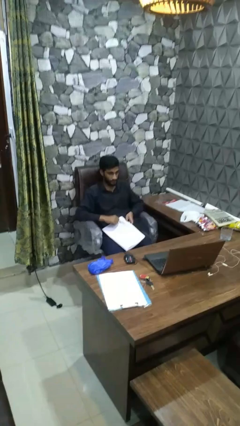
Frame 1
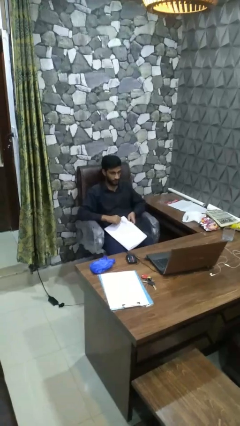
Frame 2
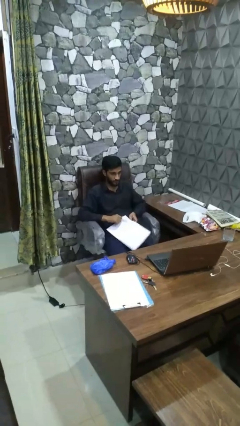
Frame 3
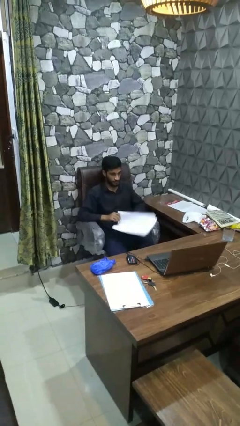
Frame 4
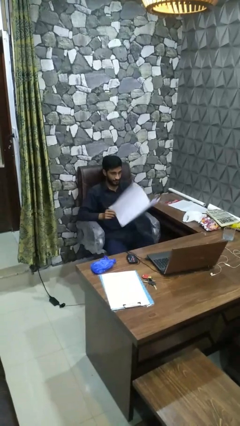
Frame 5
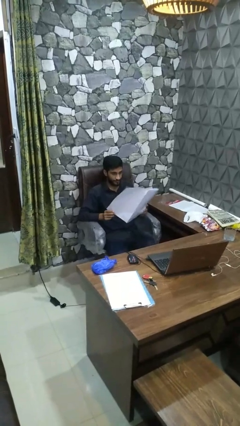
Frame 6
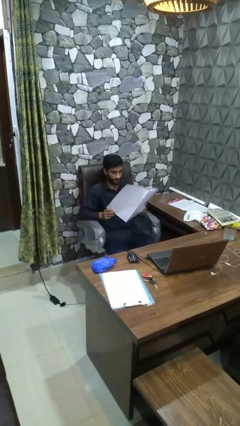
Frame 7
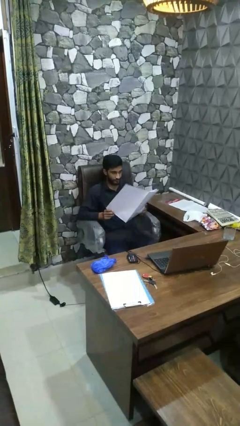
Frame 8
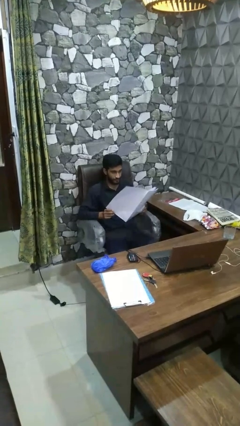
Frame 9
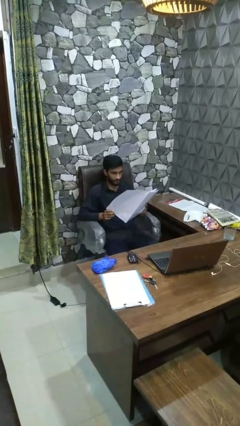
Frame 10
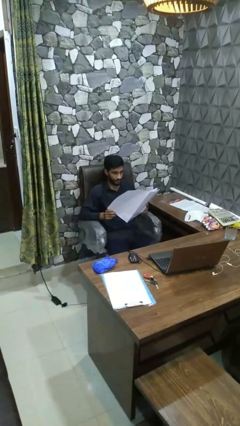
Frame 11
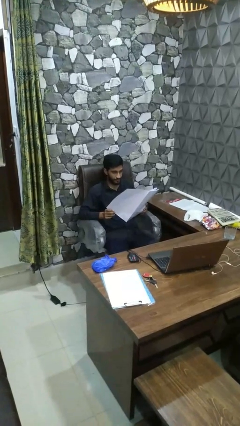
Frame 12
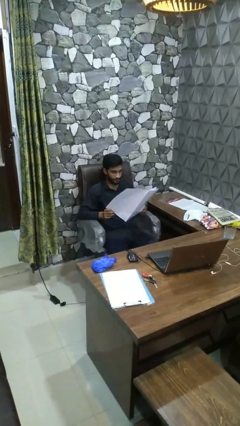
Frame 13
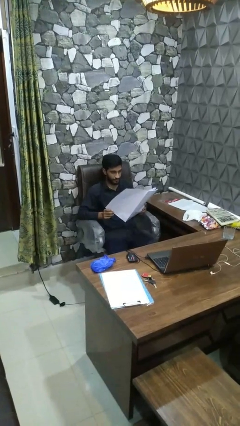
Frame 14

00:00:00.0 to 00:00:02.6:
person reads magazine

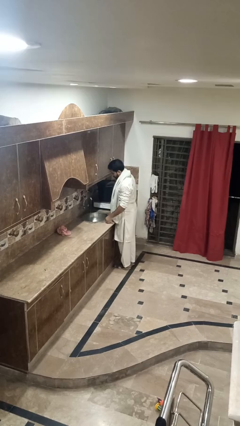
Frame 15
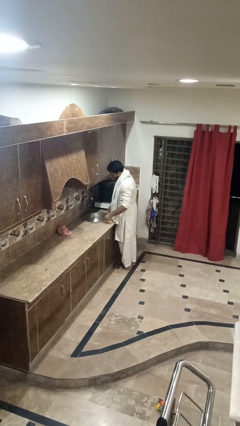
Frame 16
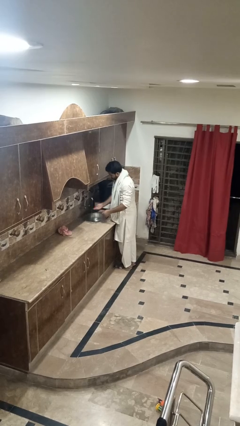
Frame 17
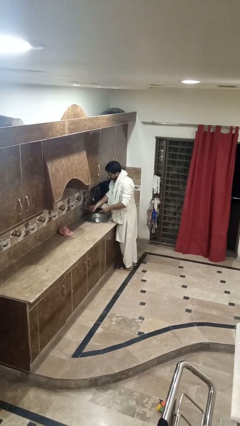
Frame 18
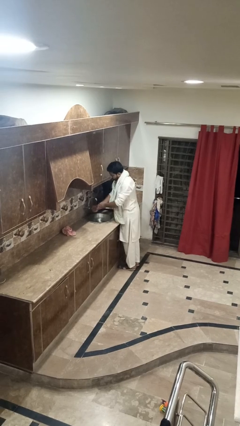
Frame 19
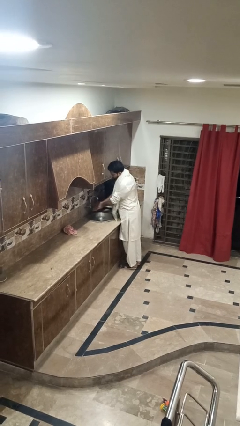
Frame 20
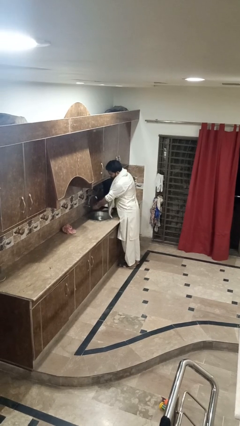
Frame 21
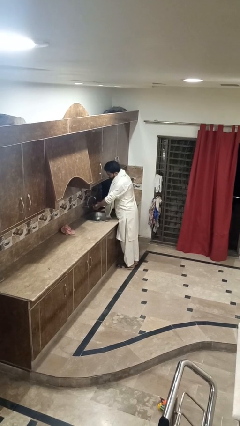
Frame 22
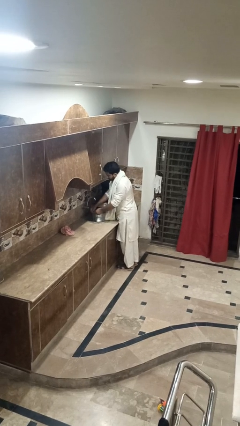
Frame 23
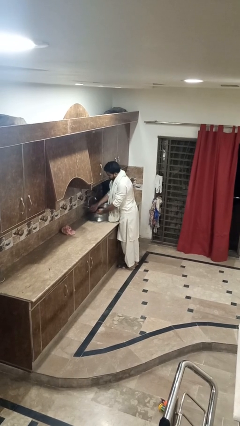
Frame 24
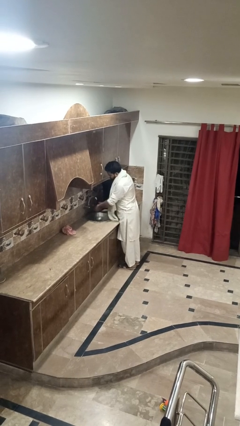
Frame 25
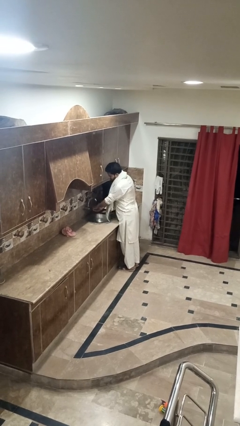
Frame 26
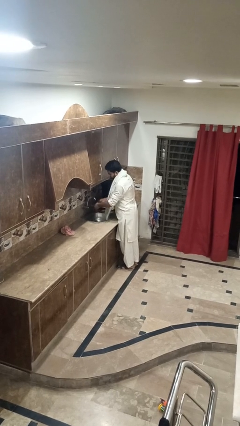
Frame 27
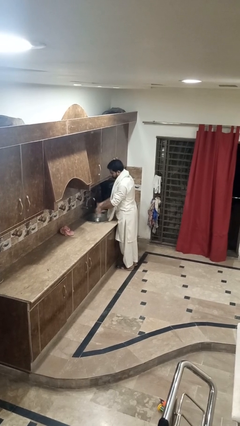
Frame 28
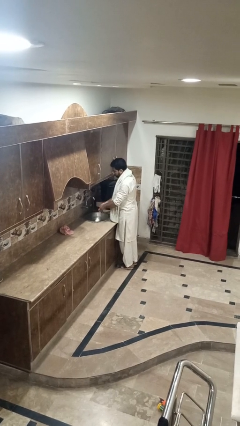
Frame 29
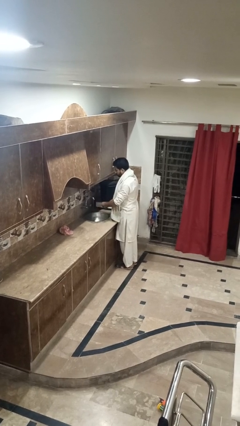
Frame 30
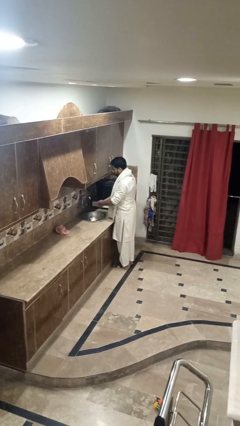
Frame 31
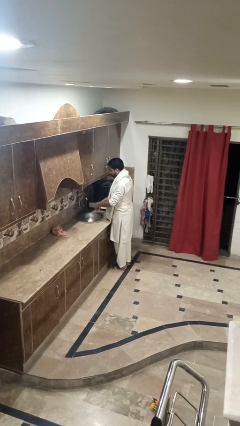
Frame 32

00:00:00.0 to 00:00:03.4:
person washes hands

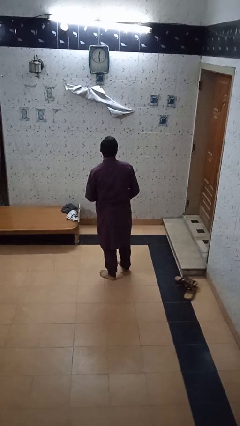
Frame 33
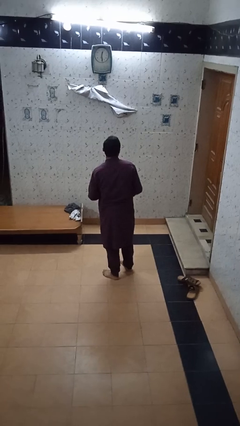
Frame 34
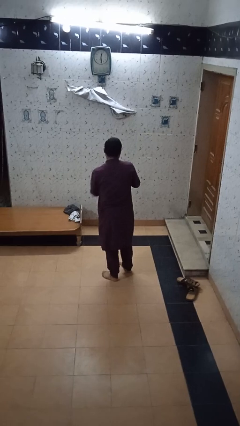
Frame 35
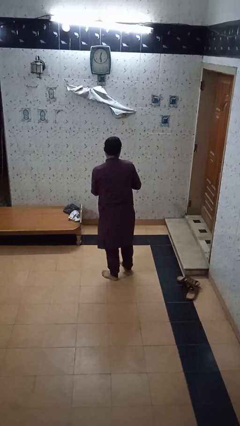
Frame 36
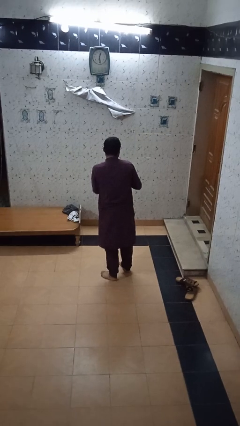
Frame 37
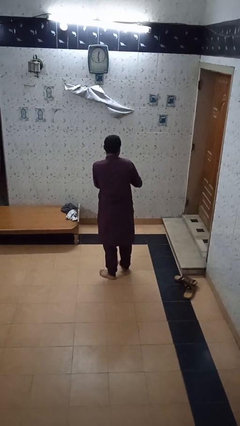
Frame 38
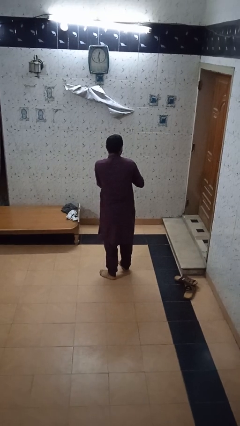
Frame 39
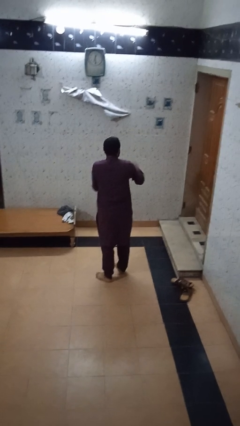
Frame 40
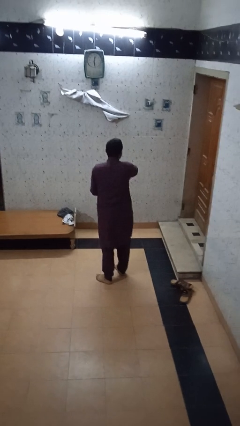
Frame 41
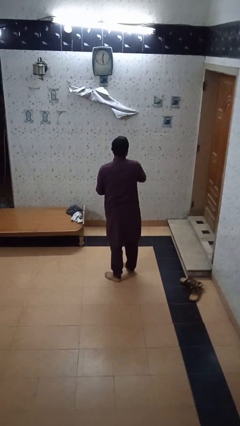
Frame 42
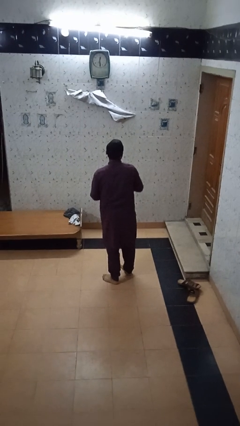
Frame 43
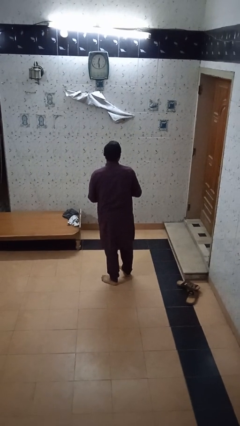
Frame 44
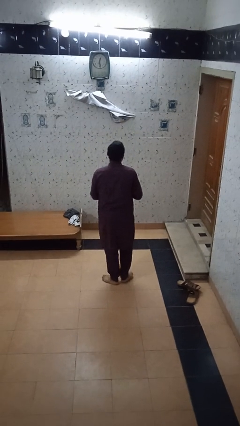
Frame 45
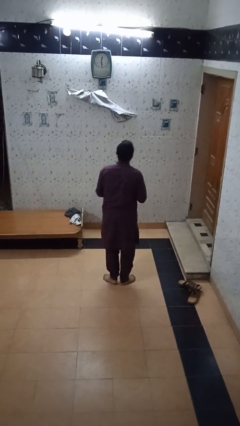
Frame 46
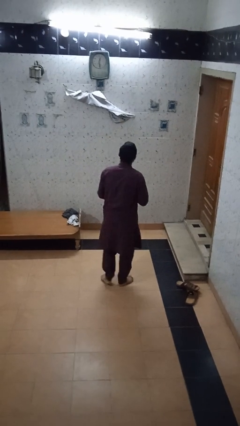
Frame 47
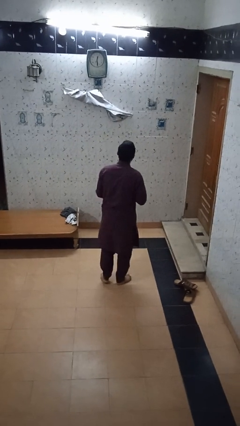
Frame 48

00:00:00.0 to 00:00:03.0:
person karate chop

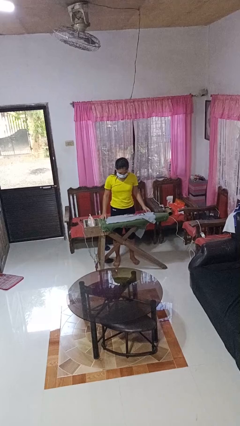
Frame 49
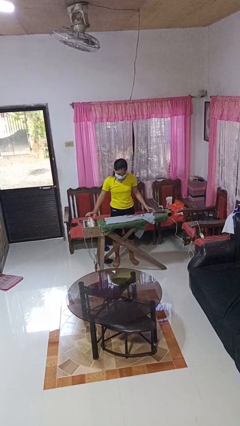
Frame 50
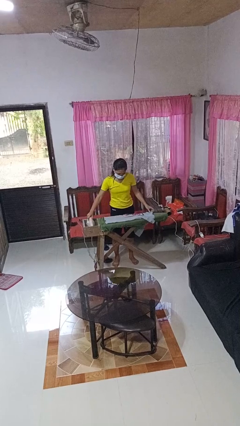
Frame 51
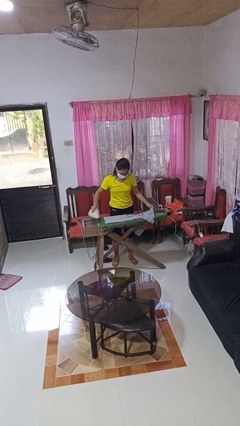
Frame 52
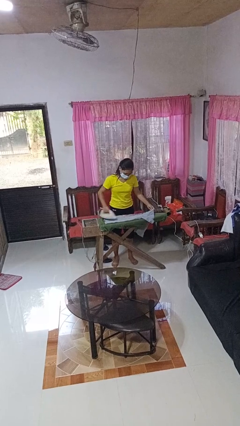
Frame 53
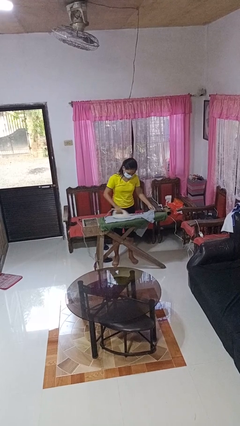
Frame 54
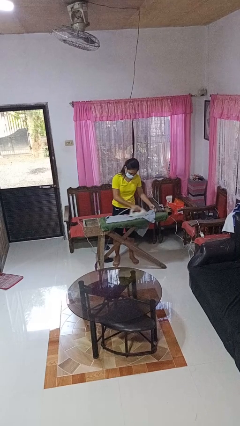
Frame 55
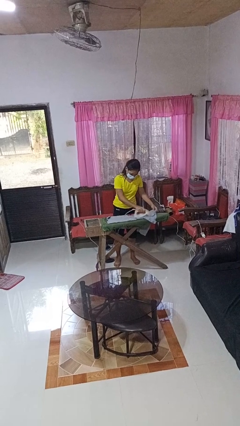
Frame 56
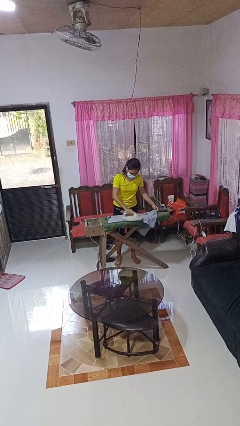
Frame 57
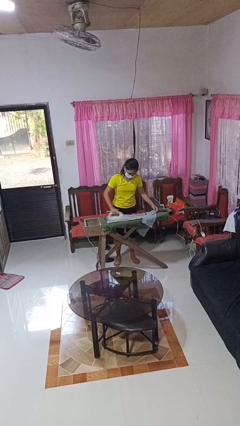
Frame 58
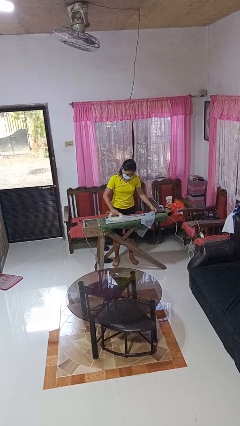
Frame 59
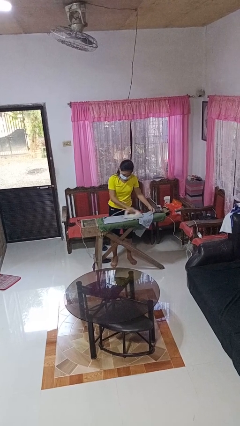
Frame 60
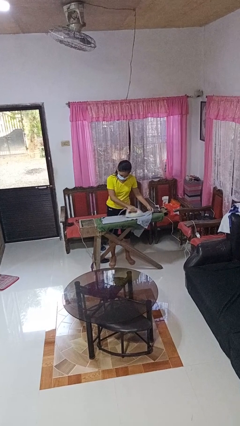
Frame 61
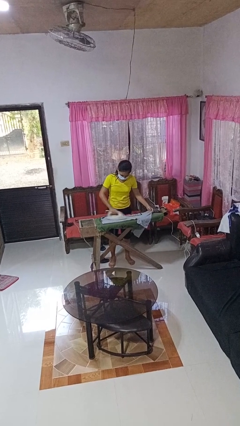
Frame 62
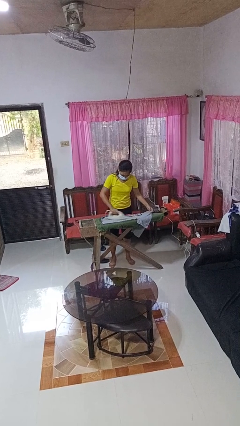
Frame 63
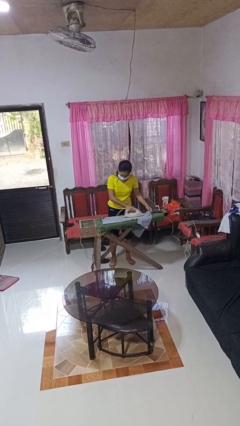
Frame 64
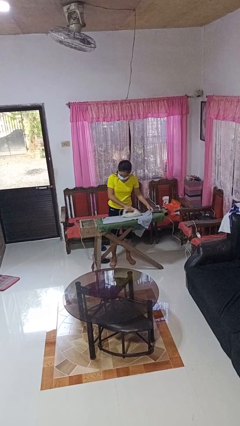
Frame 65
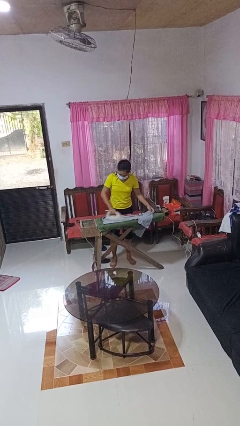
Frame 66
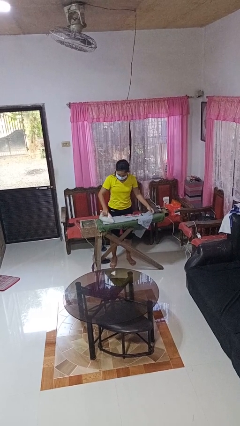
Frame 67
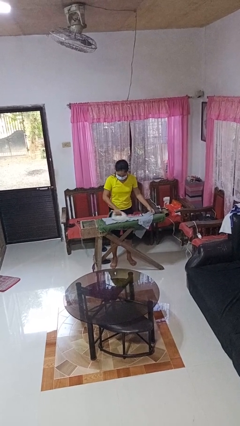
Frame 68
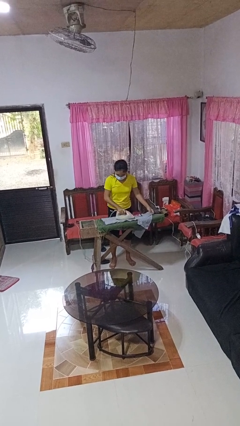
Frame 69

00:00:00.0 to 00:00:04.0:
person irons clothes

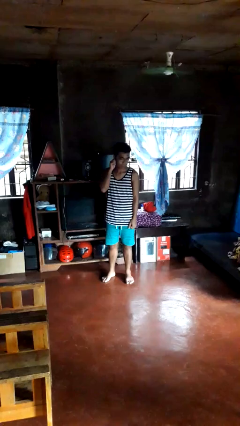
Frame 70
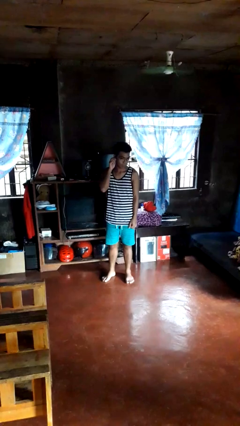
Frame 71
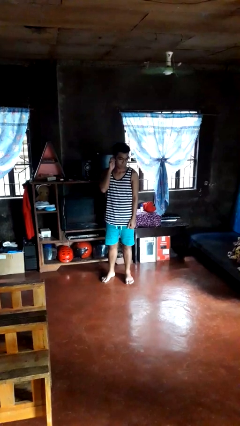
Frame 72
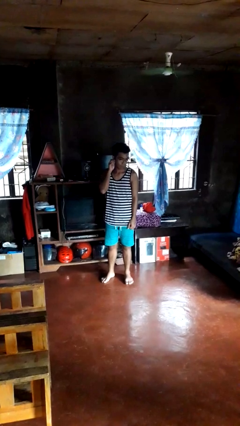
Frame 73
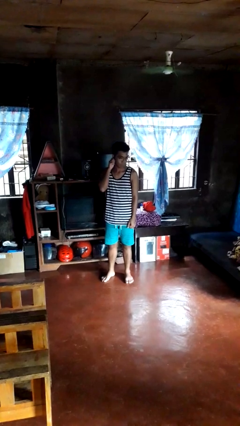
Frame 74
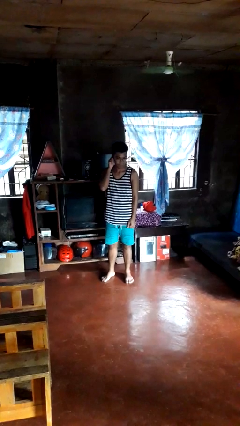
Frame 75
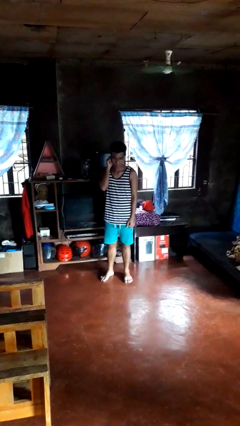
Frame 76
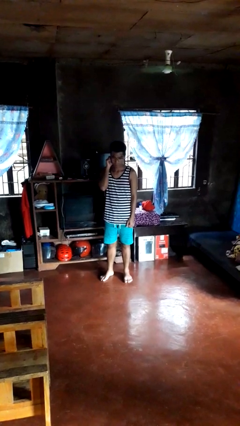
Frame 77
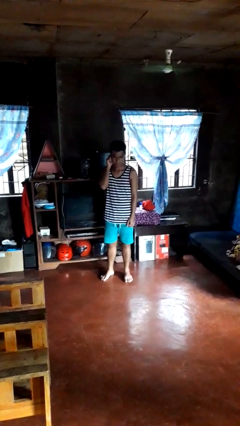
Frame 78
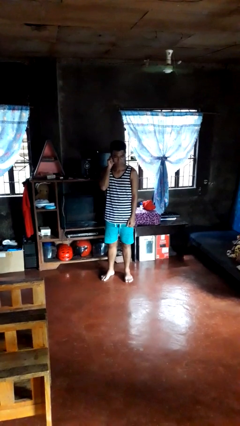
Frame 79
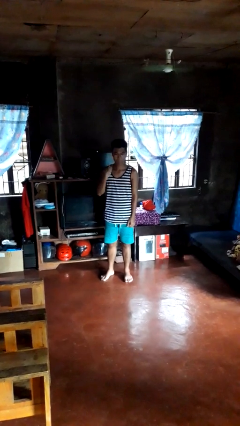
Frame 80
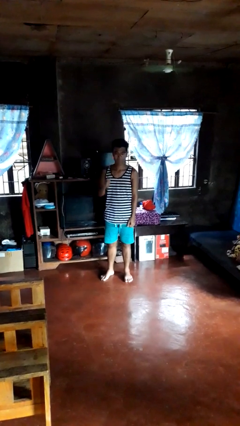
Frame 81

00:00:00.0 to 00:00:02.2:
person touches earlobe

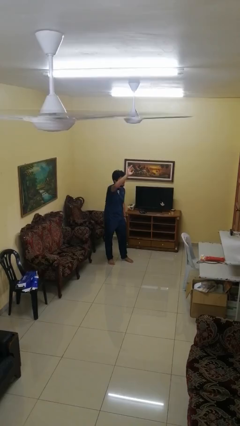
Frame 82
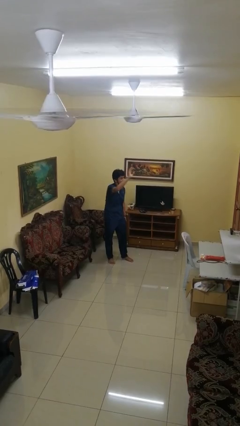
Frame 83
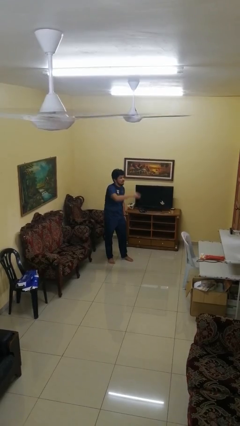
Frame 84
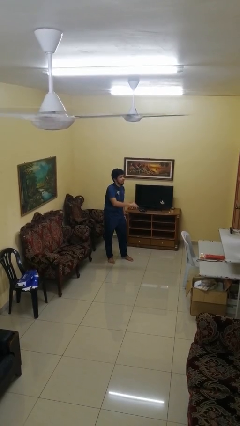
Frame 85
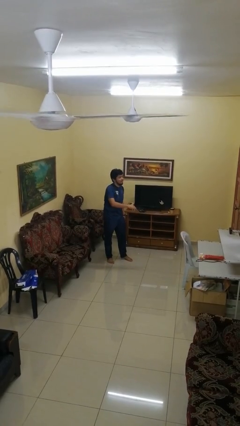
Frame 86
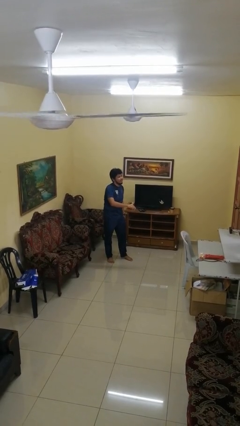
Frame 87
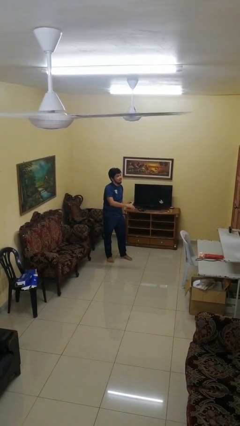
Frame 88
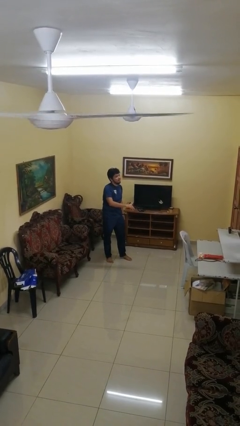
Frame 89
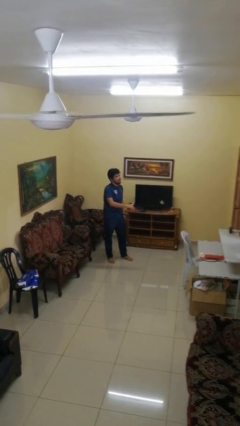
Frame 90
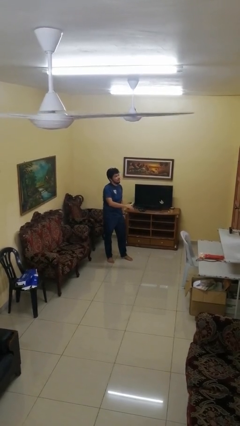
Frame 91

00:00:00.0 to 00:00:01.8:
person gestures swipe down

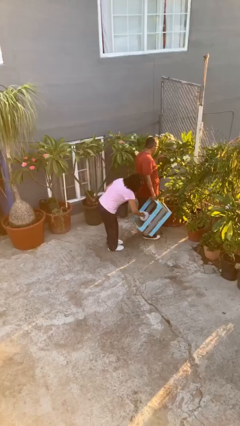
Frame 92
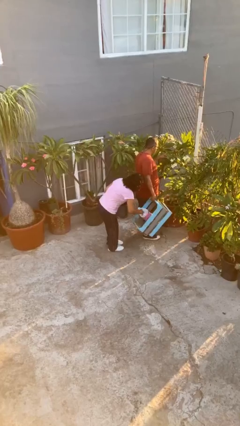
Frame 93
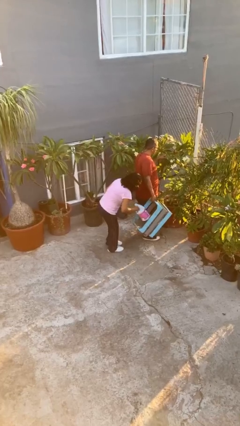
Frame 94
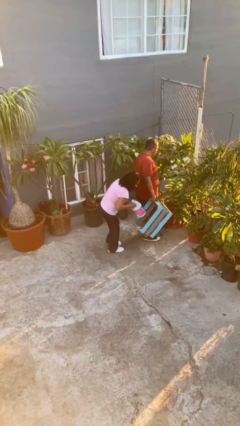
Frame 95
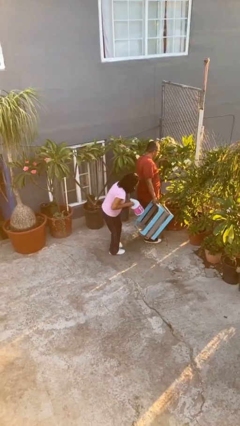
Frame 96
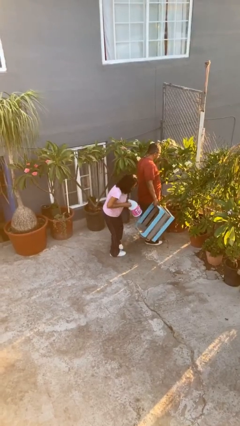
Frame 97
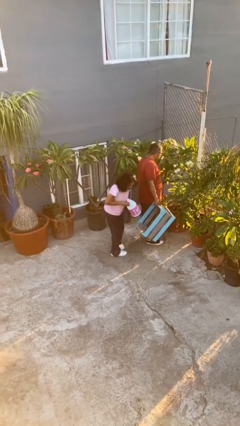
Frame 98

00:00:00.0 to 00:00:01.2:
person steals object from person
